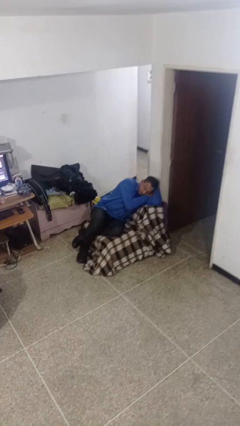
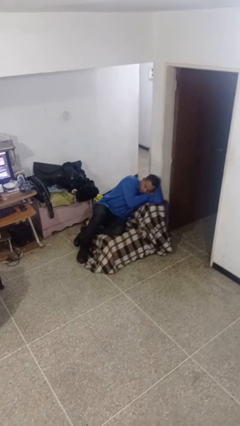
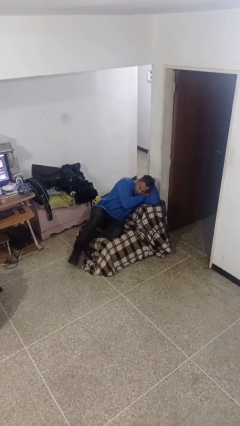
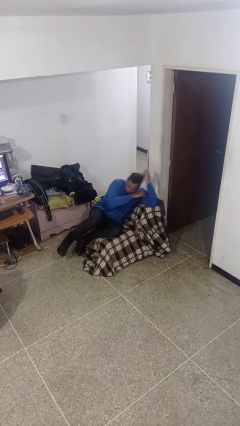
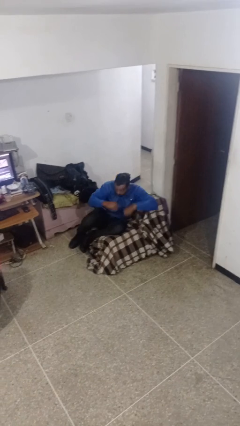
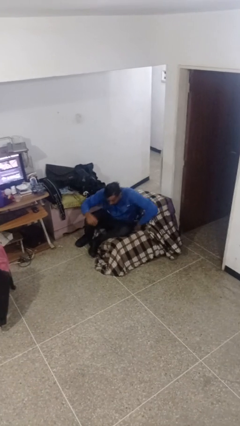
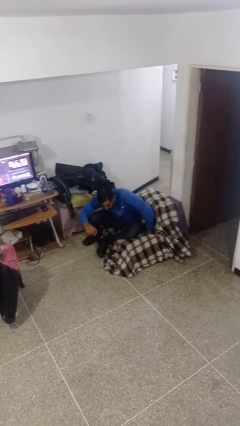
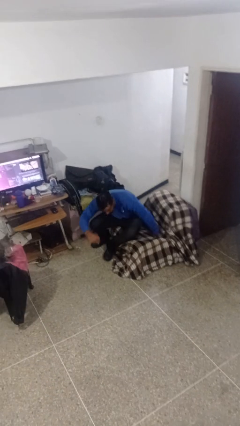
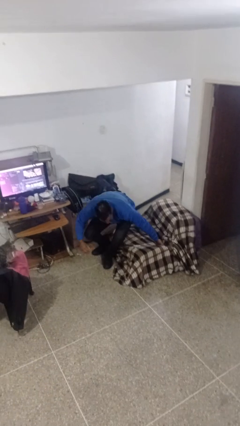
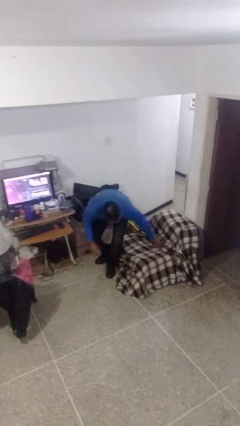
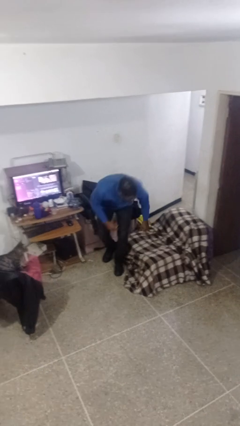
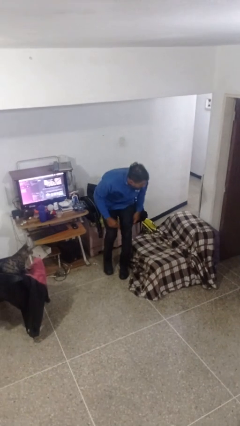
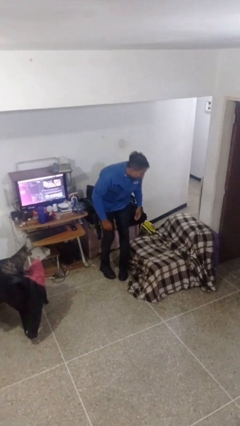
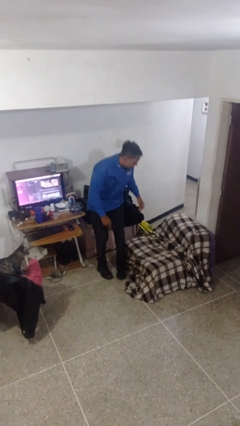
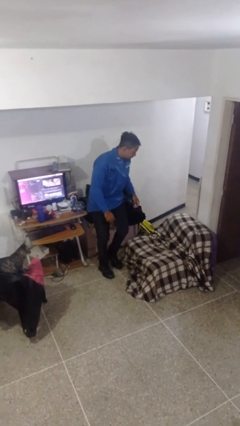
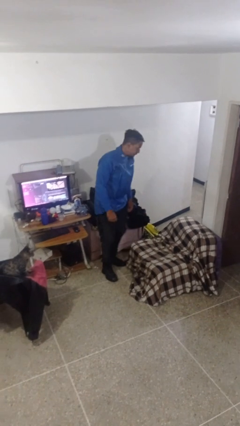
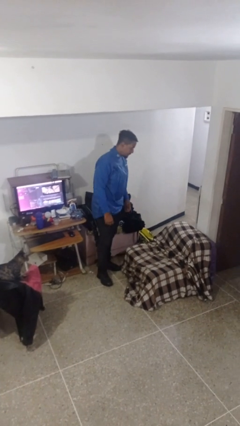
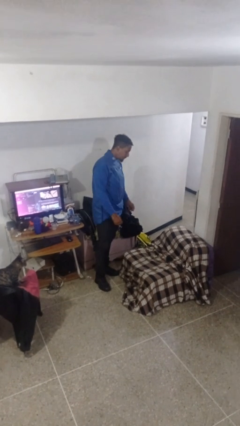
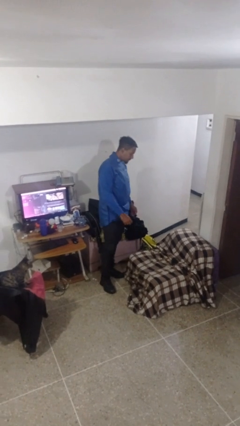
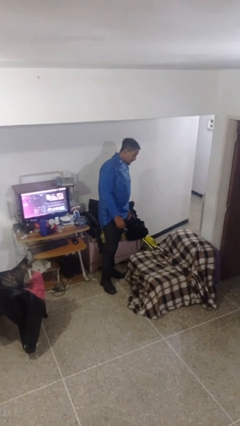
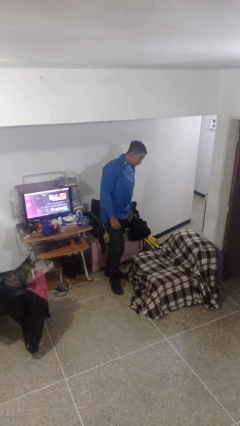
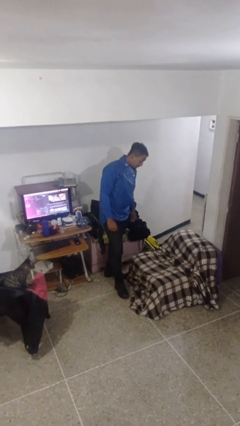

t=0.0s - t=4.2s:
person stands up

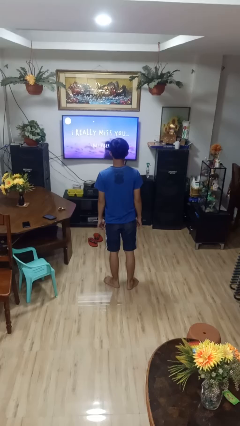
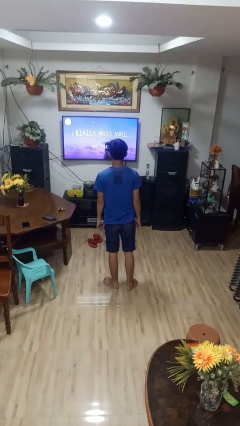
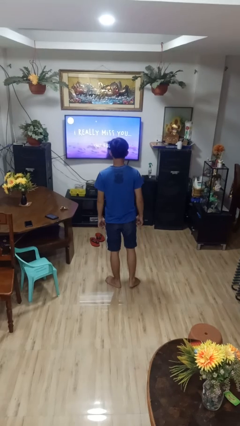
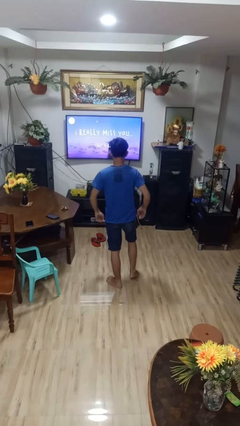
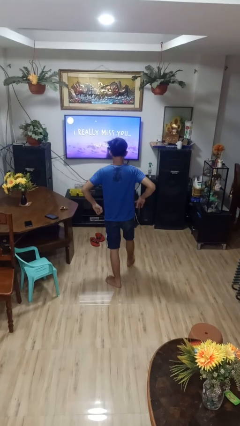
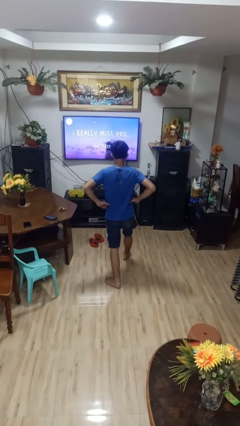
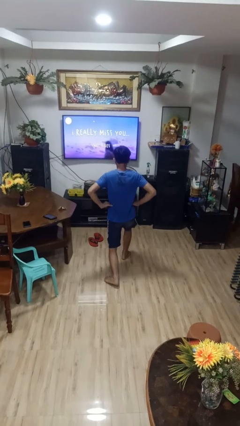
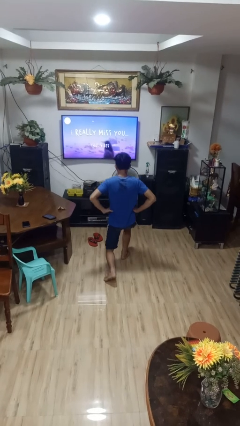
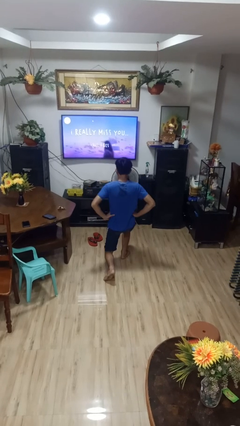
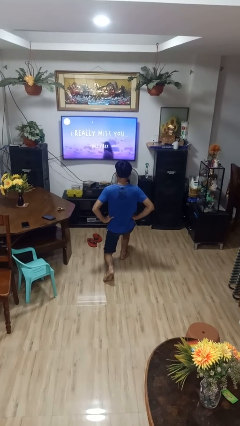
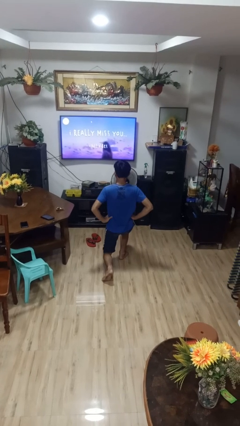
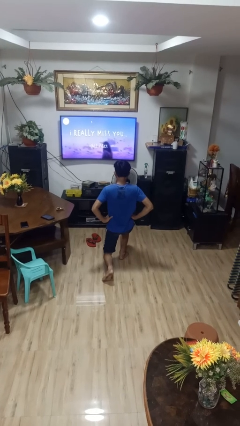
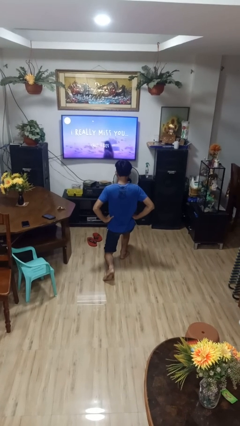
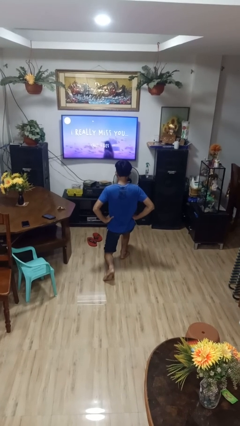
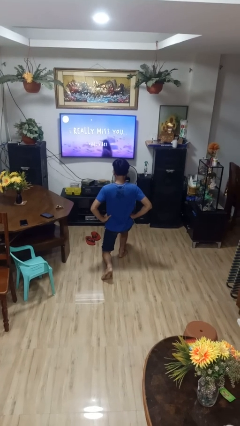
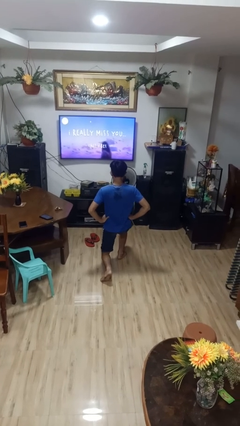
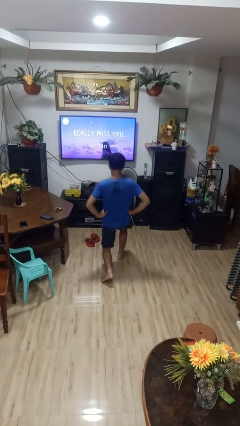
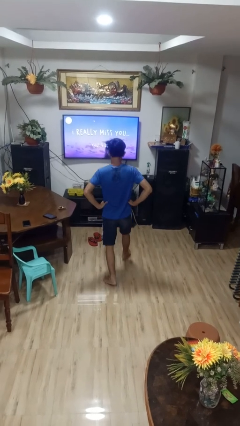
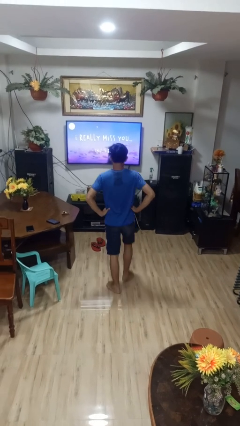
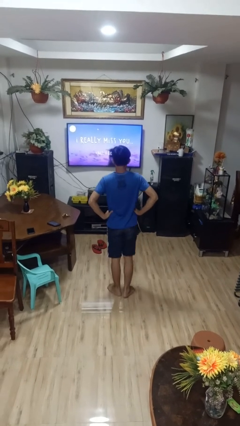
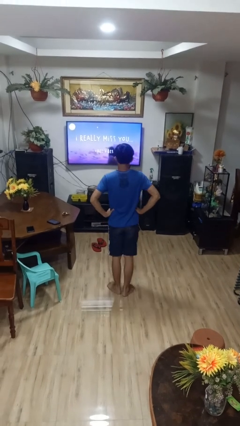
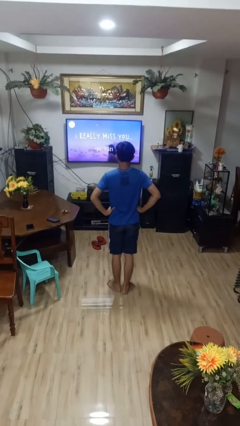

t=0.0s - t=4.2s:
person exercises with lunges

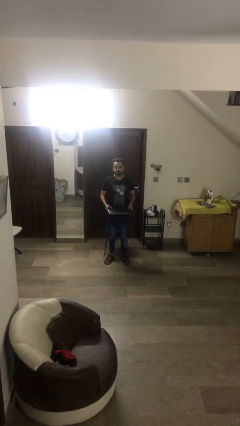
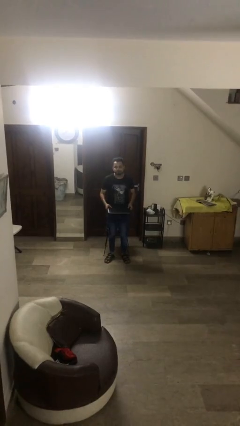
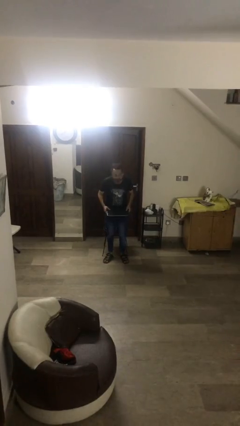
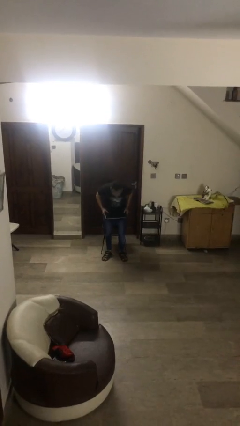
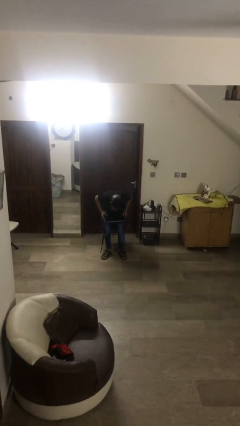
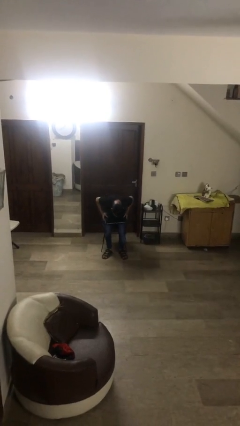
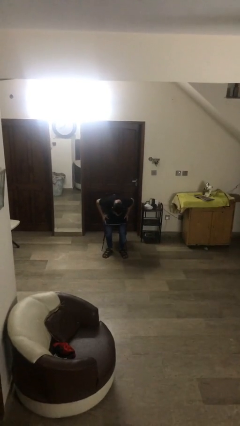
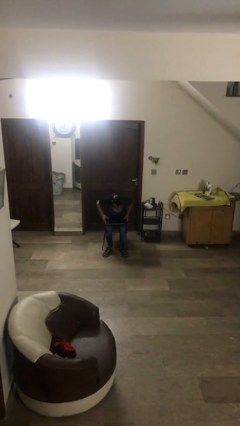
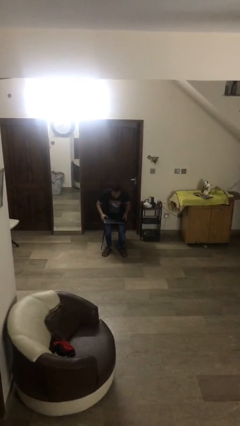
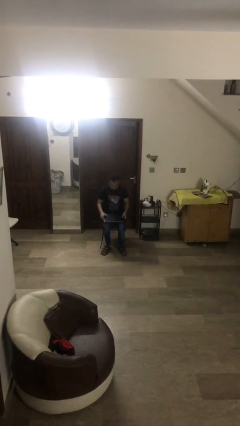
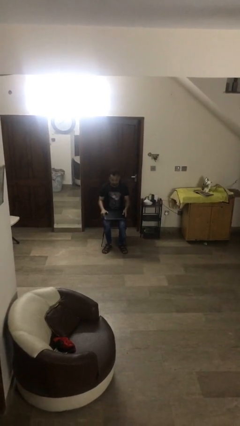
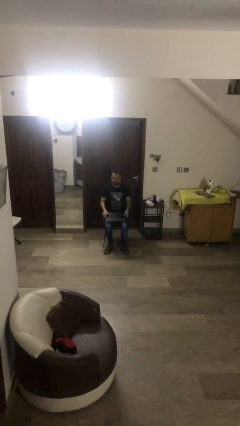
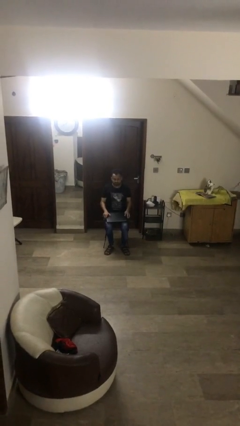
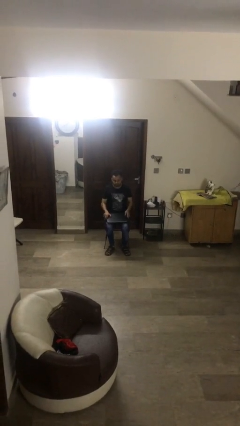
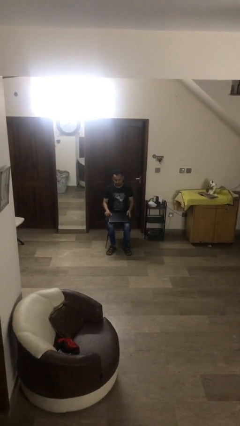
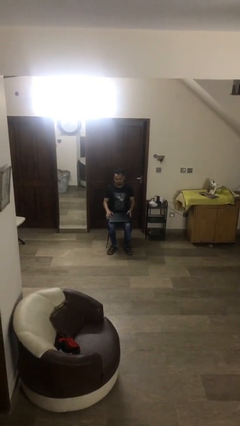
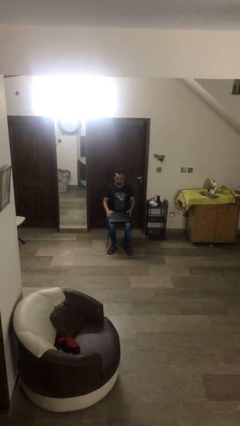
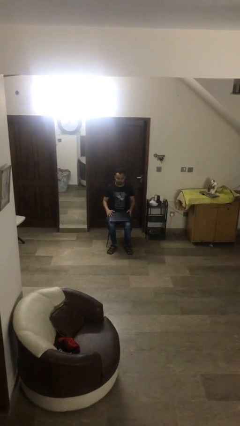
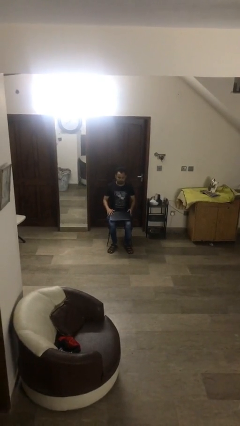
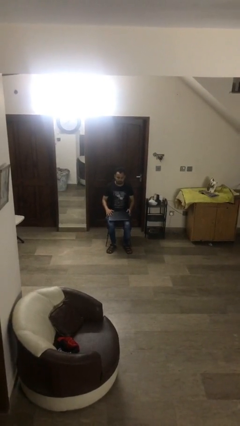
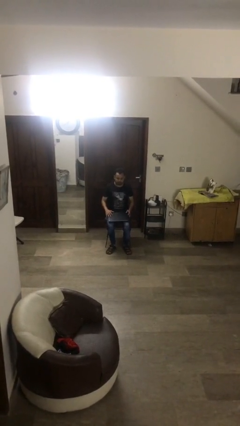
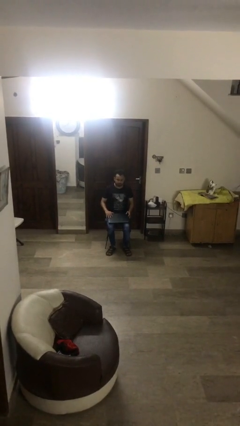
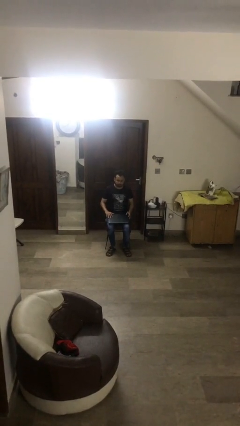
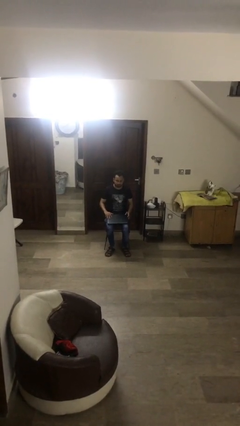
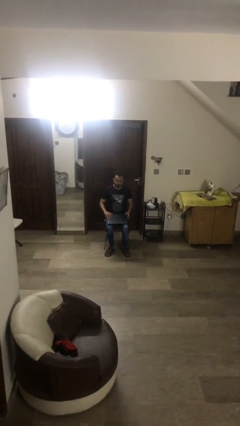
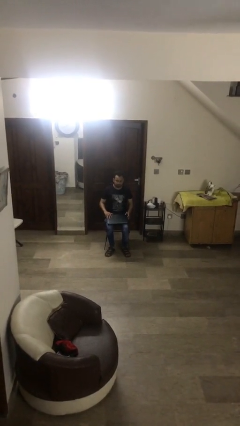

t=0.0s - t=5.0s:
person sits down

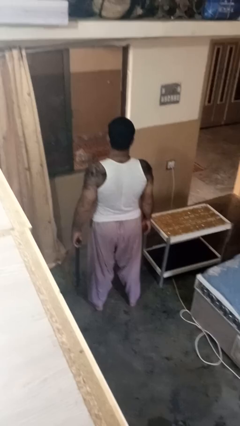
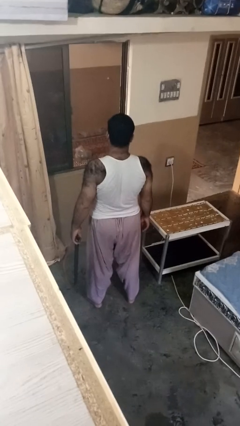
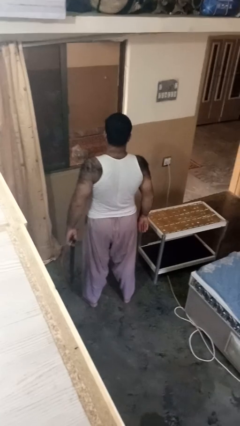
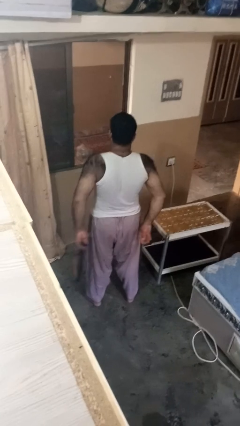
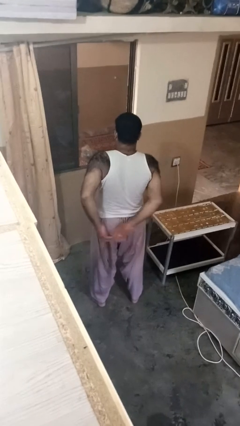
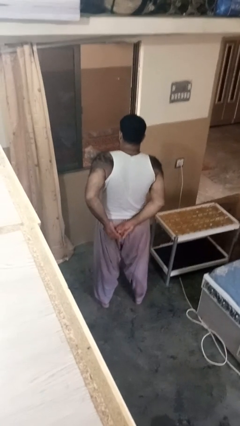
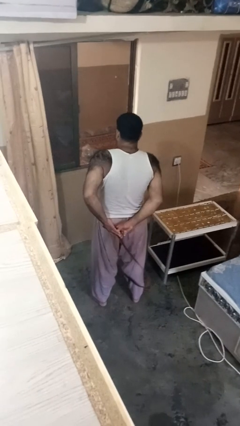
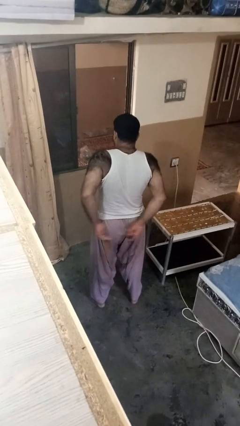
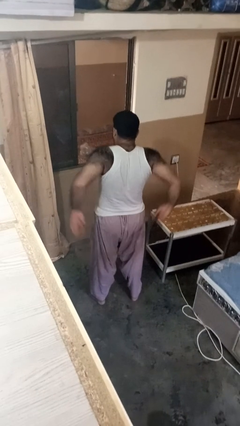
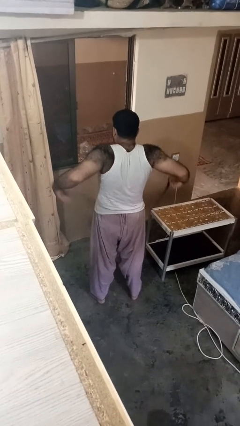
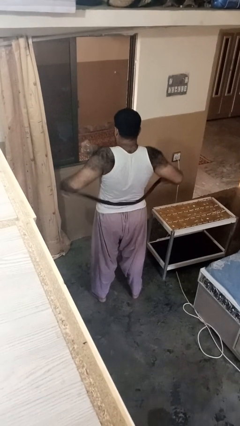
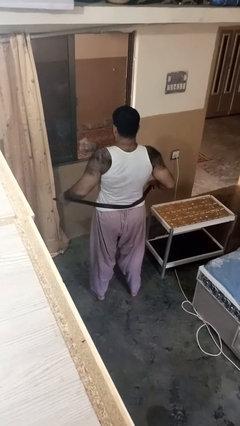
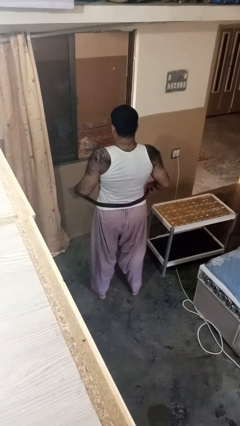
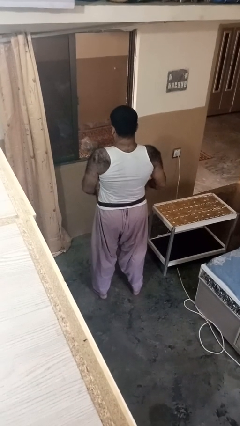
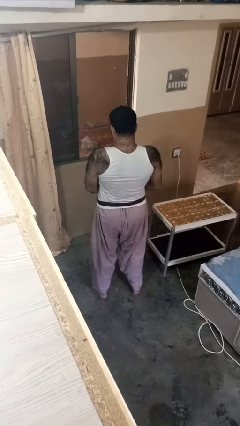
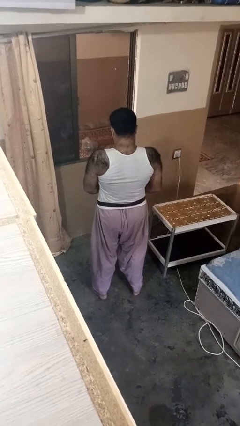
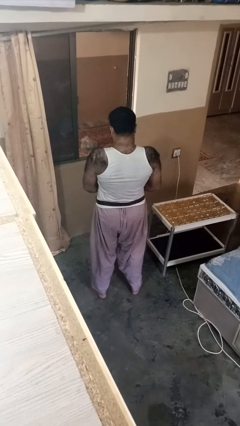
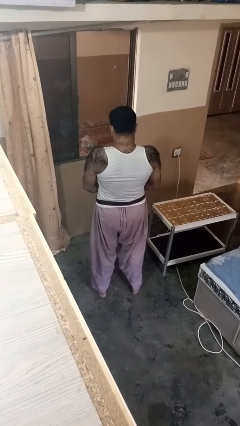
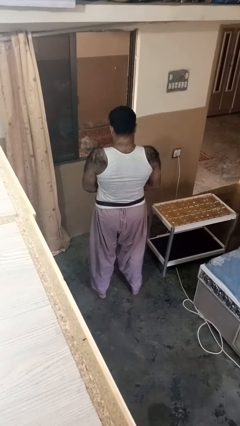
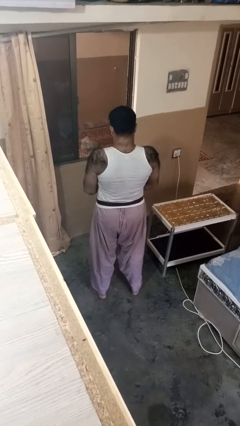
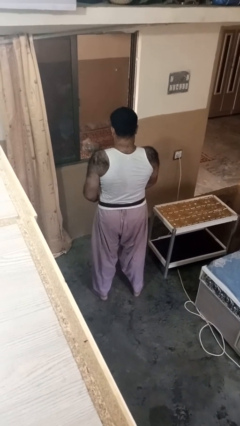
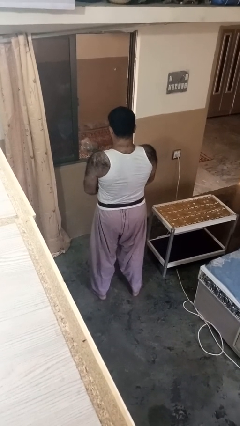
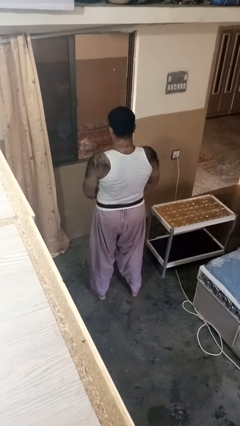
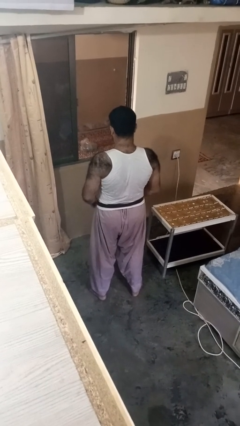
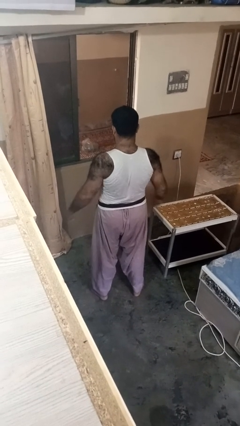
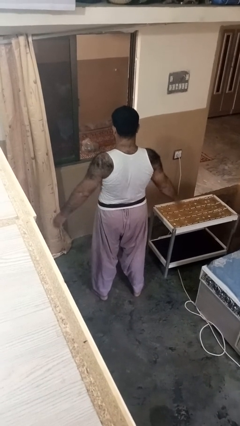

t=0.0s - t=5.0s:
person puts on belt
